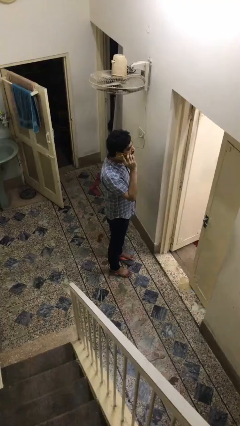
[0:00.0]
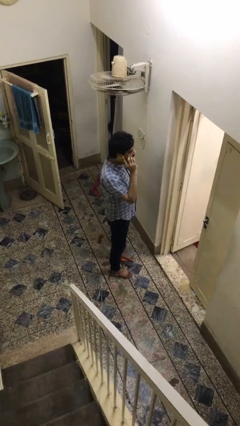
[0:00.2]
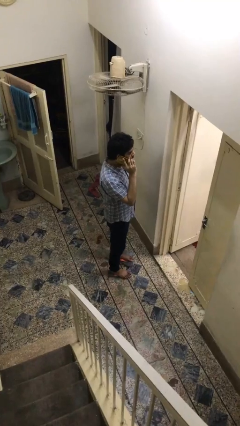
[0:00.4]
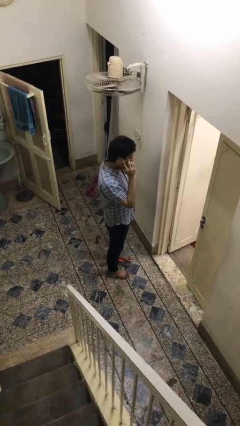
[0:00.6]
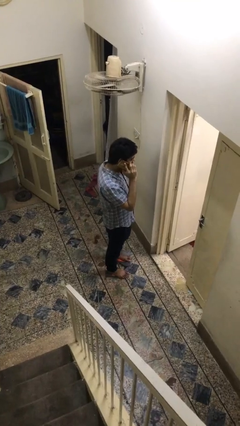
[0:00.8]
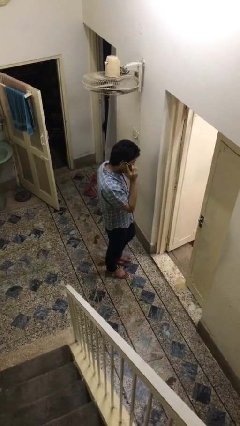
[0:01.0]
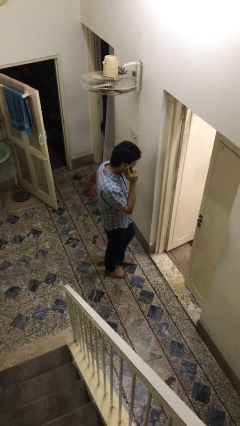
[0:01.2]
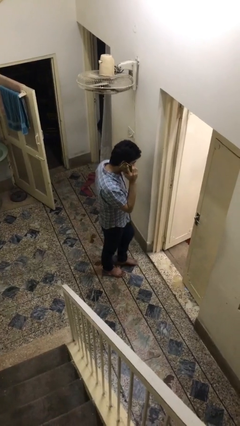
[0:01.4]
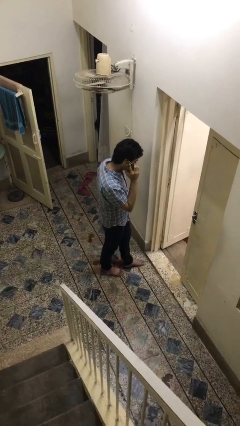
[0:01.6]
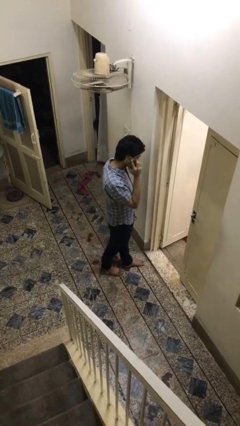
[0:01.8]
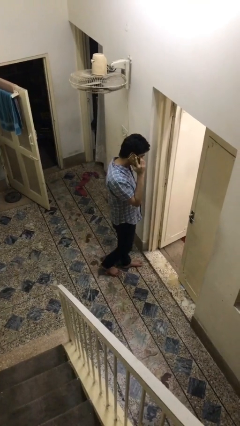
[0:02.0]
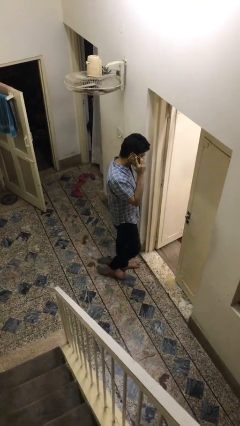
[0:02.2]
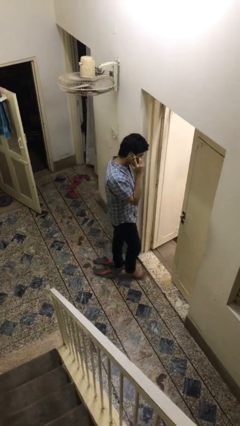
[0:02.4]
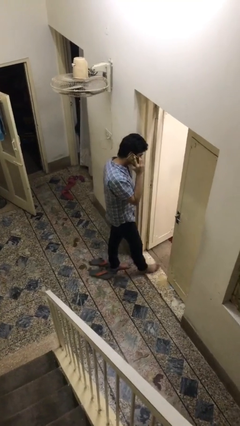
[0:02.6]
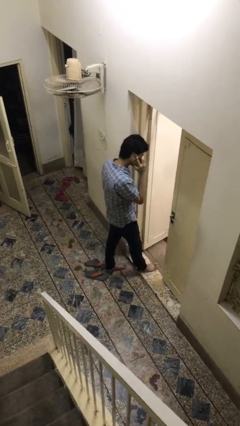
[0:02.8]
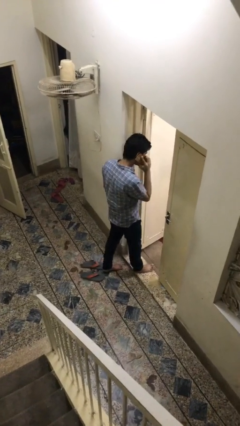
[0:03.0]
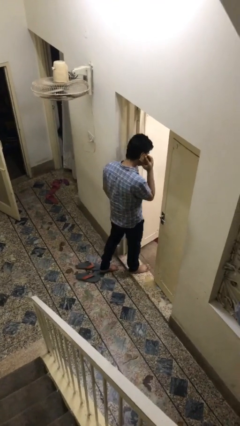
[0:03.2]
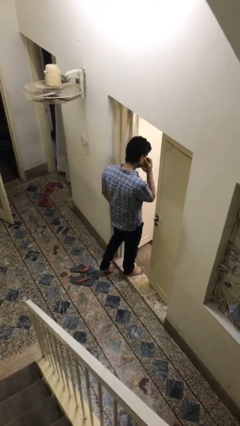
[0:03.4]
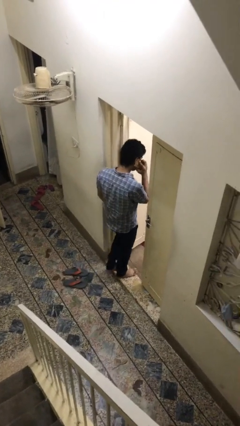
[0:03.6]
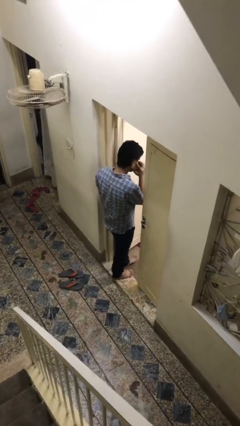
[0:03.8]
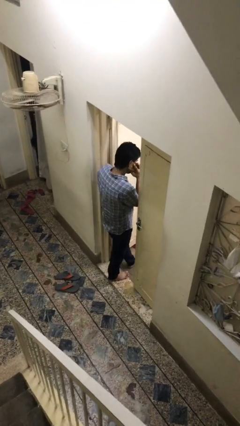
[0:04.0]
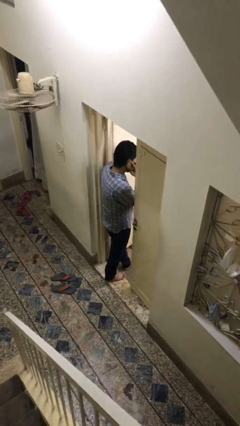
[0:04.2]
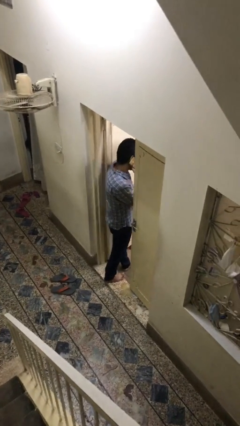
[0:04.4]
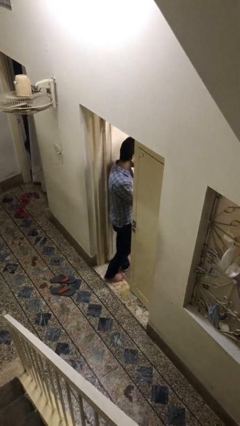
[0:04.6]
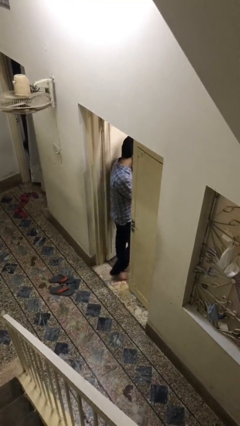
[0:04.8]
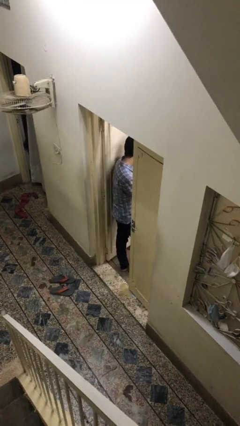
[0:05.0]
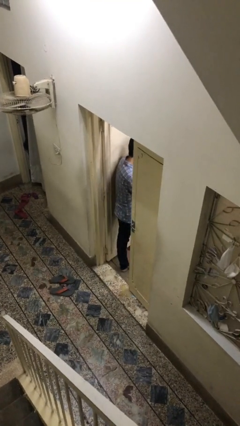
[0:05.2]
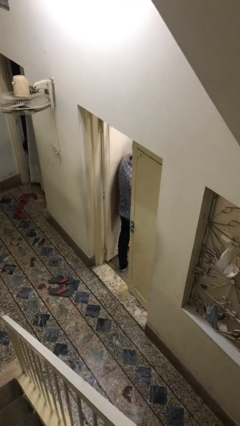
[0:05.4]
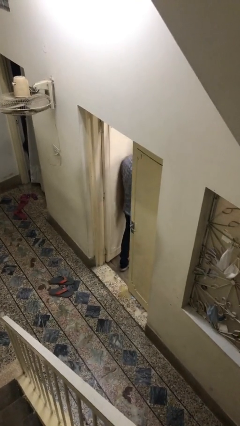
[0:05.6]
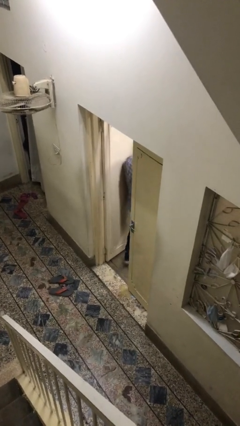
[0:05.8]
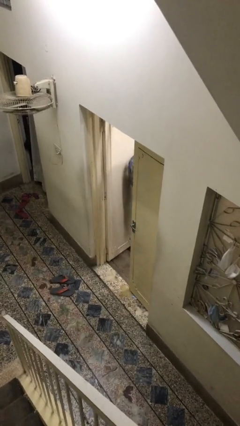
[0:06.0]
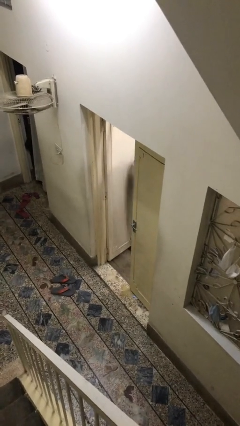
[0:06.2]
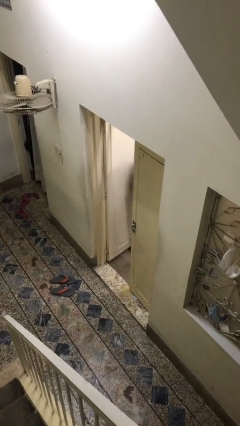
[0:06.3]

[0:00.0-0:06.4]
person exits scene through structure

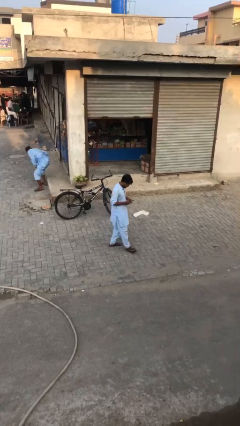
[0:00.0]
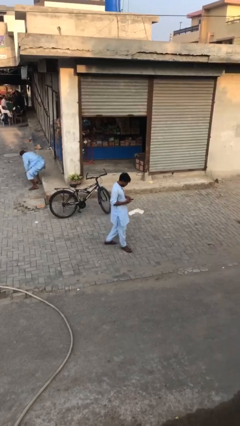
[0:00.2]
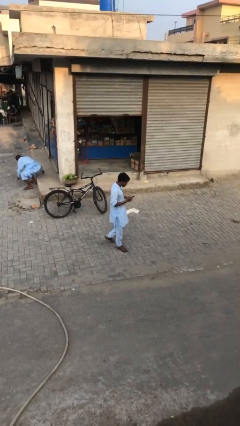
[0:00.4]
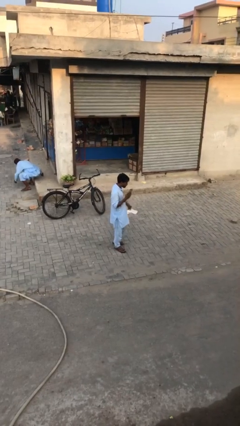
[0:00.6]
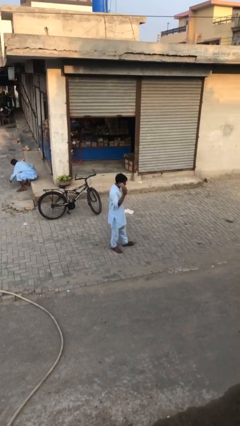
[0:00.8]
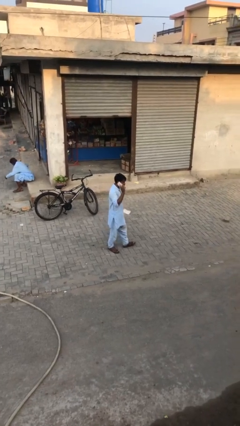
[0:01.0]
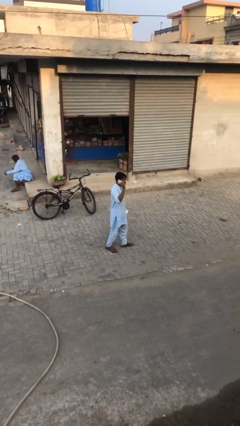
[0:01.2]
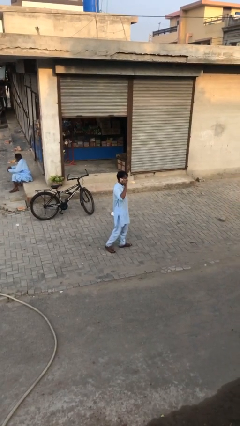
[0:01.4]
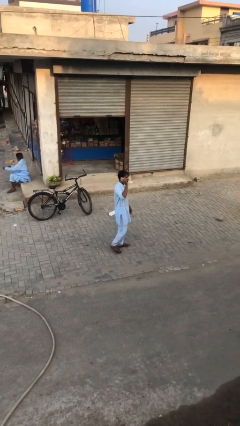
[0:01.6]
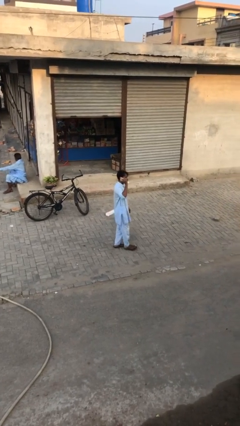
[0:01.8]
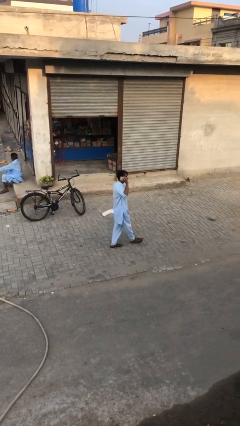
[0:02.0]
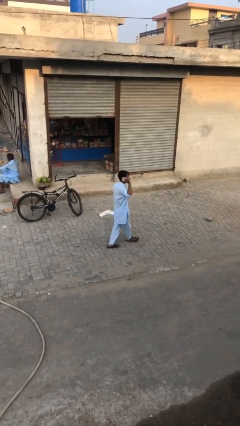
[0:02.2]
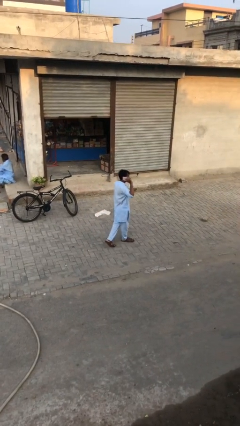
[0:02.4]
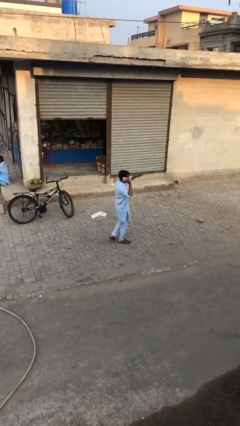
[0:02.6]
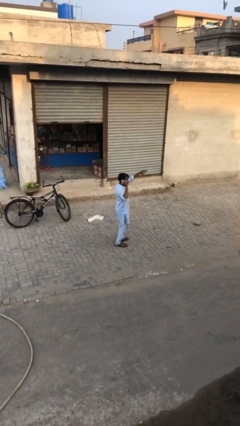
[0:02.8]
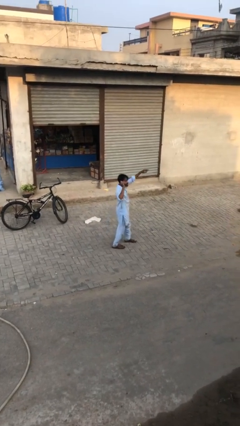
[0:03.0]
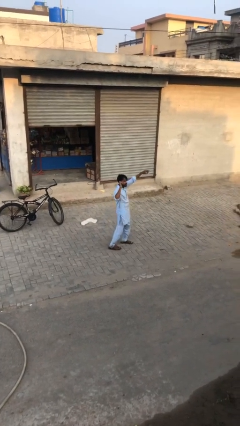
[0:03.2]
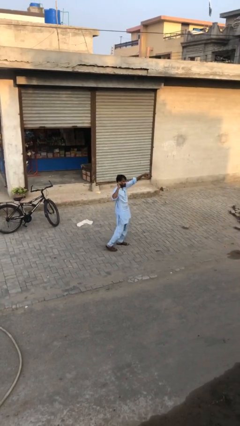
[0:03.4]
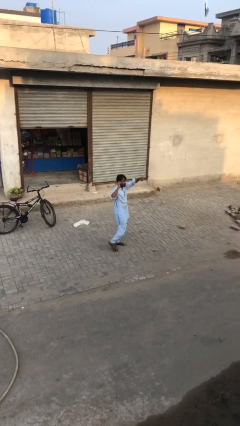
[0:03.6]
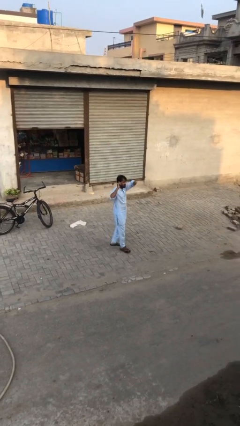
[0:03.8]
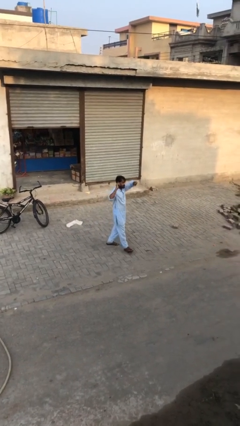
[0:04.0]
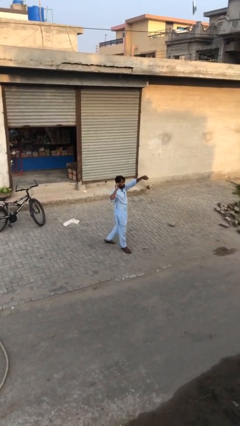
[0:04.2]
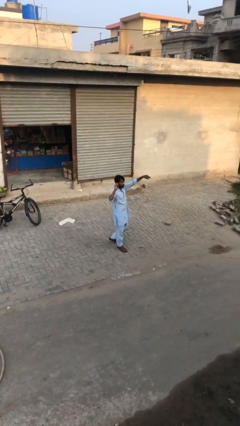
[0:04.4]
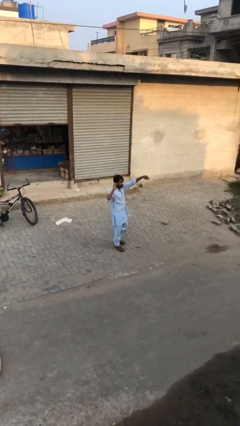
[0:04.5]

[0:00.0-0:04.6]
person talks on phone

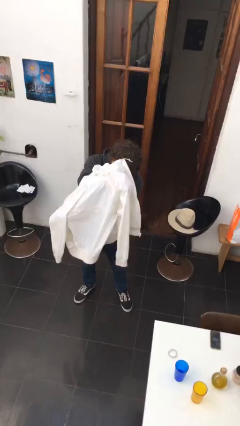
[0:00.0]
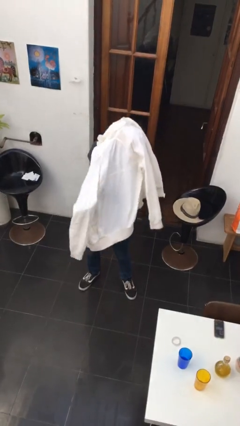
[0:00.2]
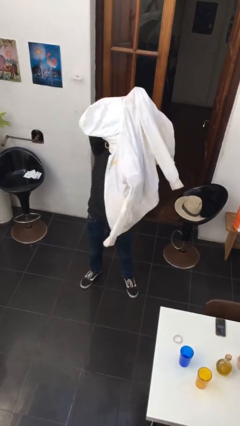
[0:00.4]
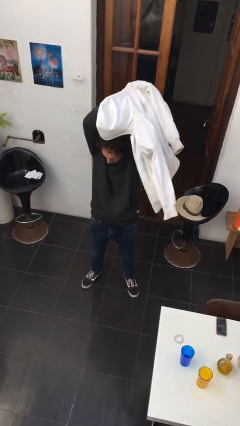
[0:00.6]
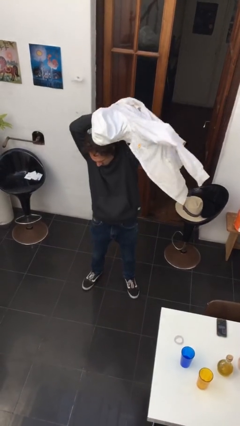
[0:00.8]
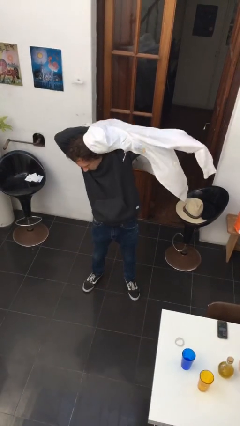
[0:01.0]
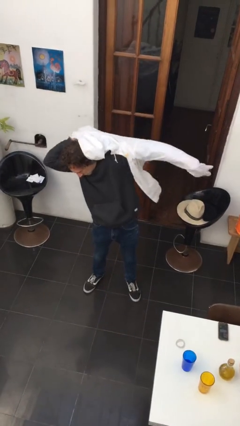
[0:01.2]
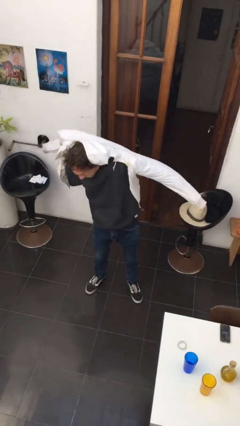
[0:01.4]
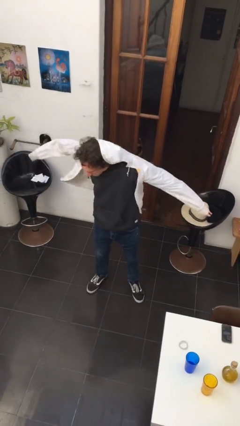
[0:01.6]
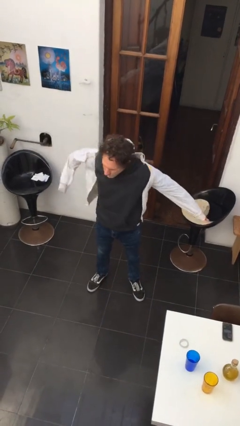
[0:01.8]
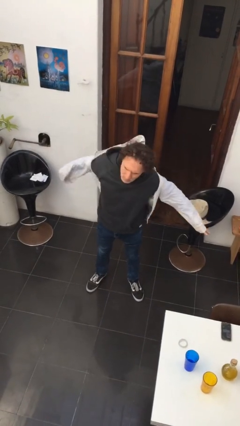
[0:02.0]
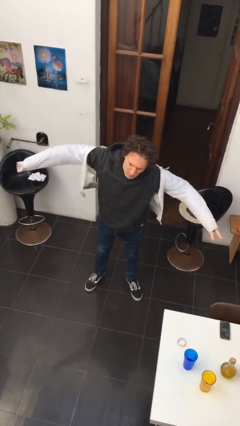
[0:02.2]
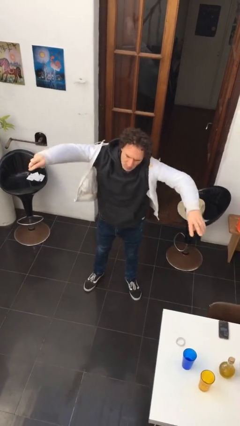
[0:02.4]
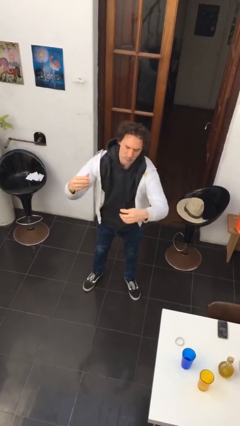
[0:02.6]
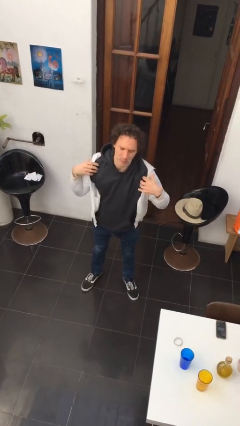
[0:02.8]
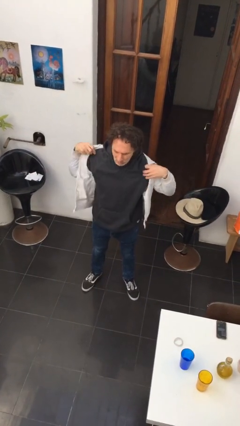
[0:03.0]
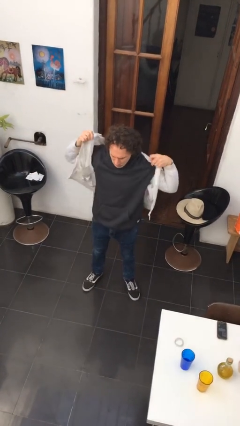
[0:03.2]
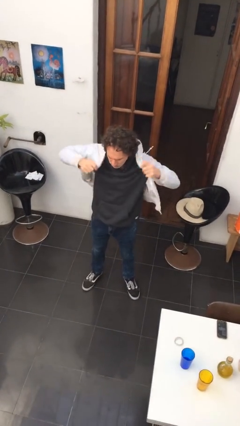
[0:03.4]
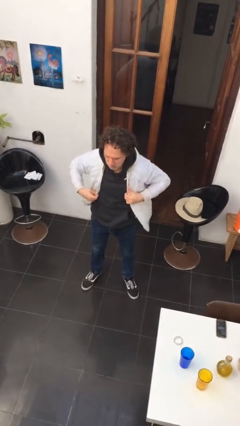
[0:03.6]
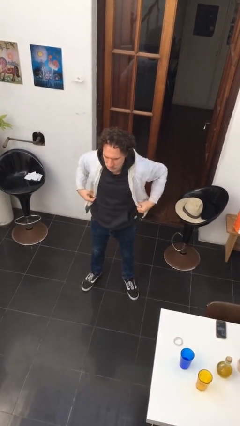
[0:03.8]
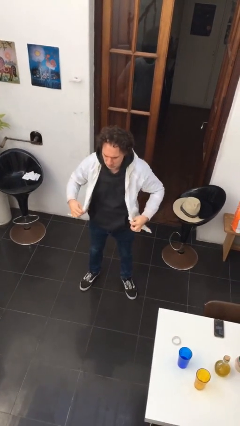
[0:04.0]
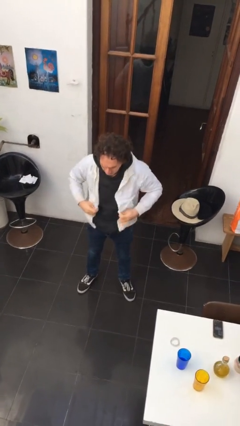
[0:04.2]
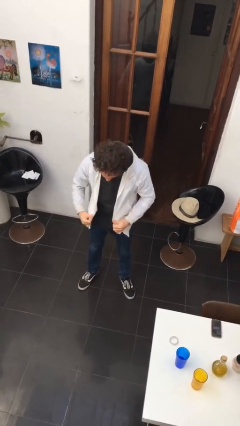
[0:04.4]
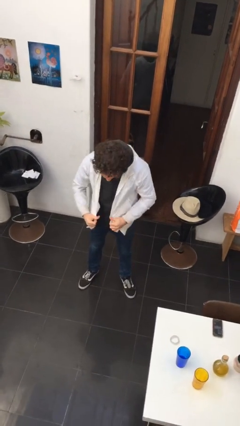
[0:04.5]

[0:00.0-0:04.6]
person puts on jacket

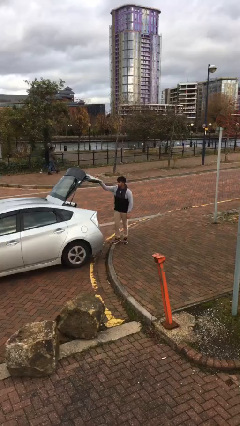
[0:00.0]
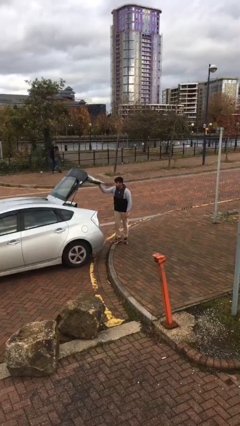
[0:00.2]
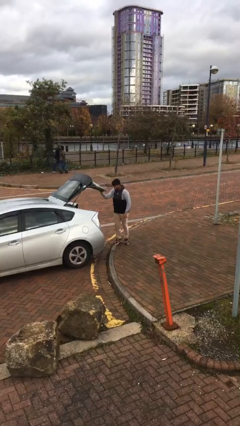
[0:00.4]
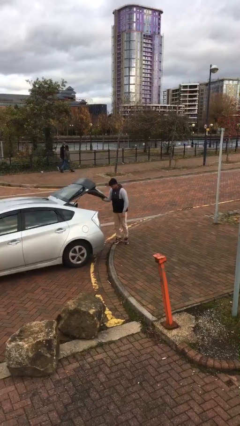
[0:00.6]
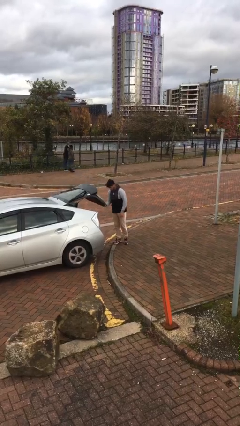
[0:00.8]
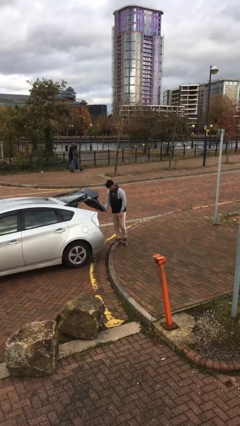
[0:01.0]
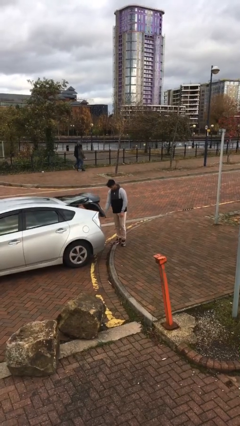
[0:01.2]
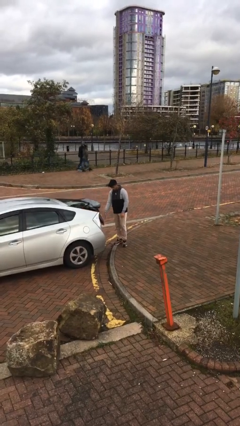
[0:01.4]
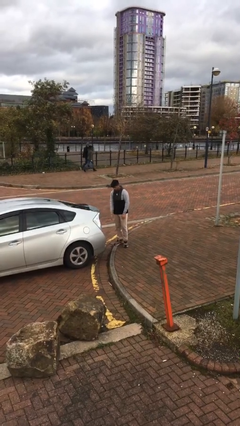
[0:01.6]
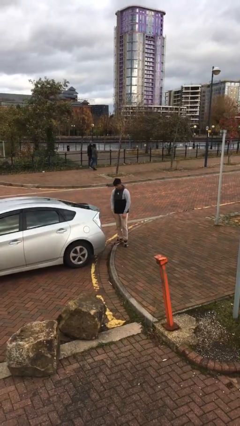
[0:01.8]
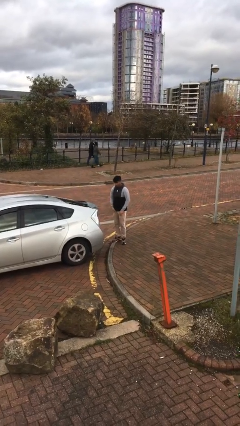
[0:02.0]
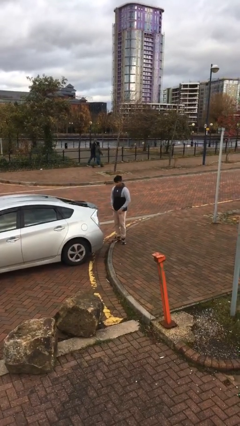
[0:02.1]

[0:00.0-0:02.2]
person closes car trunk
